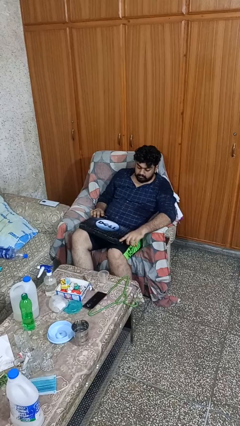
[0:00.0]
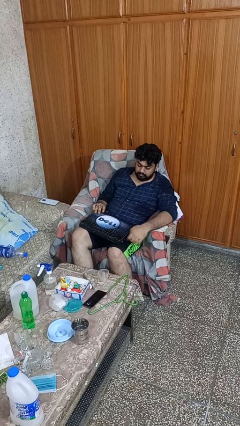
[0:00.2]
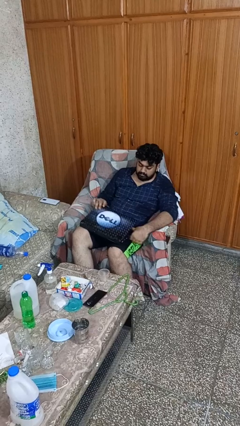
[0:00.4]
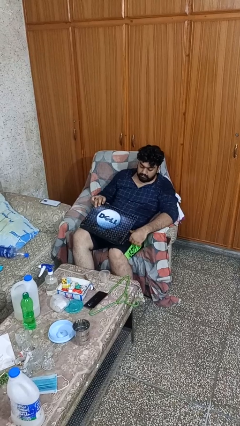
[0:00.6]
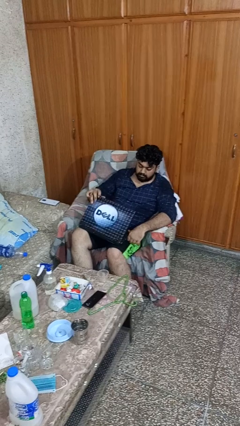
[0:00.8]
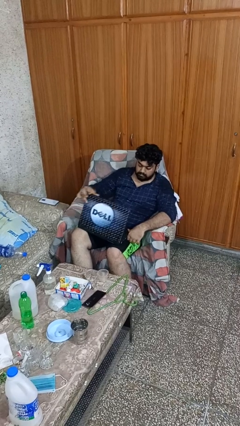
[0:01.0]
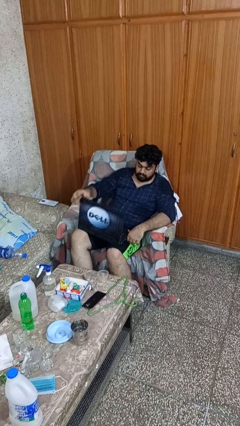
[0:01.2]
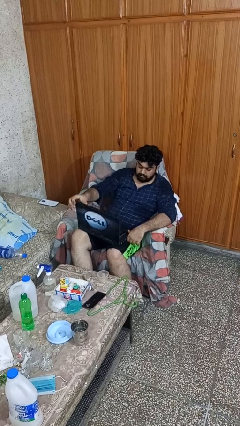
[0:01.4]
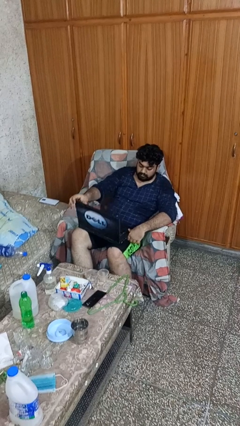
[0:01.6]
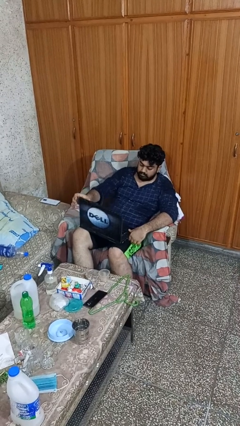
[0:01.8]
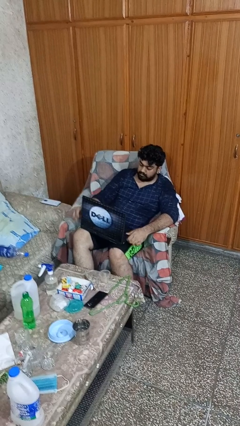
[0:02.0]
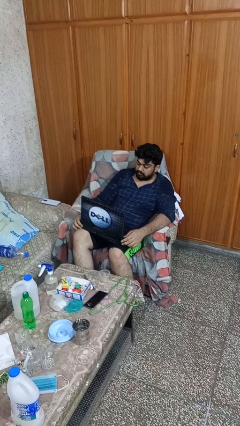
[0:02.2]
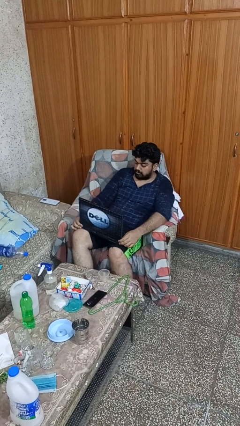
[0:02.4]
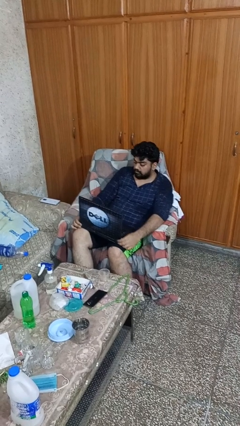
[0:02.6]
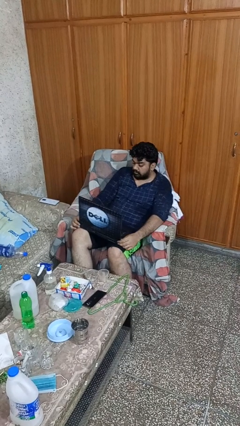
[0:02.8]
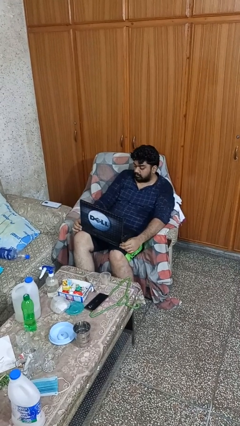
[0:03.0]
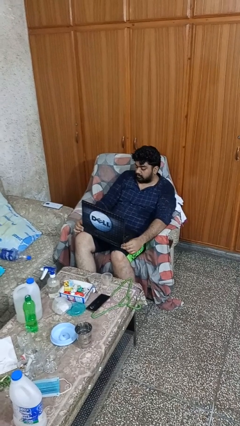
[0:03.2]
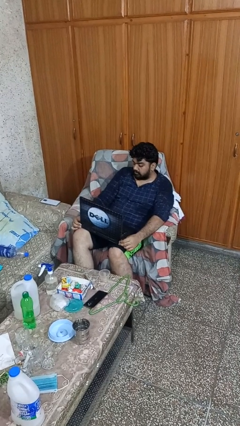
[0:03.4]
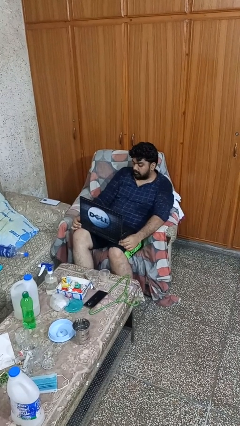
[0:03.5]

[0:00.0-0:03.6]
person opens laptop

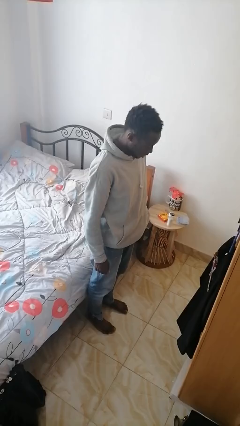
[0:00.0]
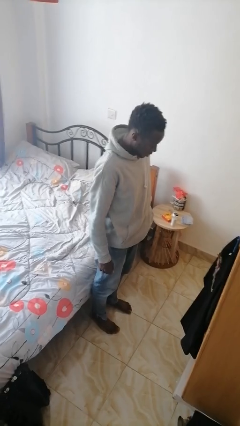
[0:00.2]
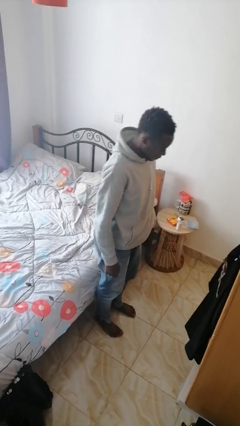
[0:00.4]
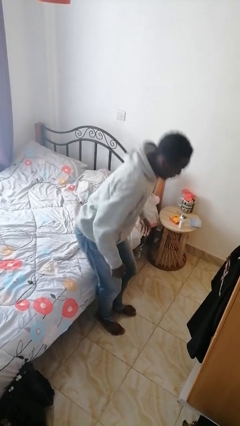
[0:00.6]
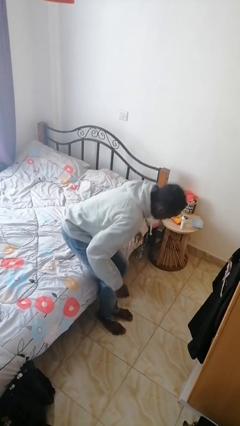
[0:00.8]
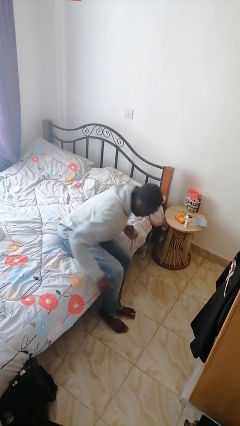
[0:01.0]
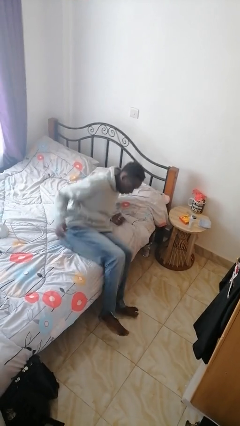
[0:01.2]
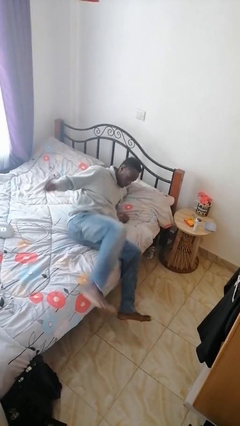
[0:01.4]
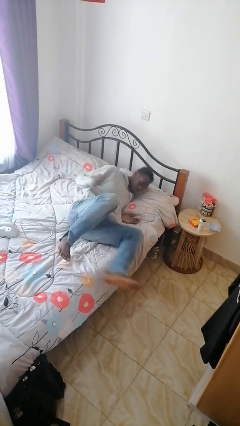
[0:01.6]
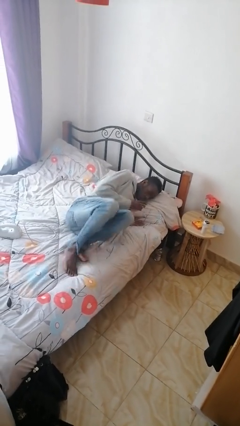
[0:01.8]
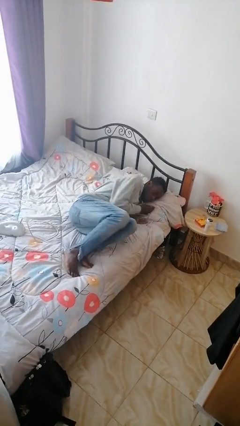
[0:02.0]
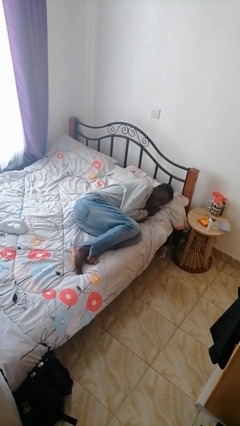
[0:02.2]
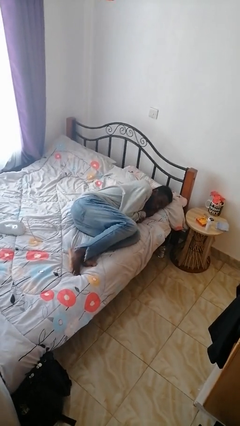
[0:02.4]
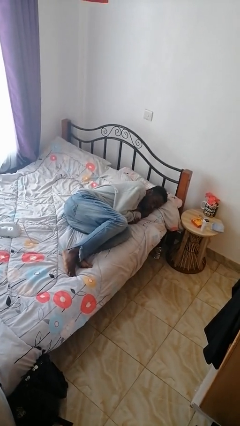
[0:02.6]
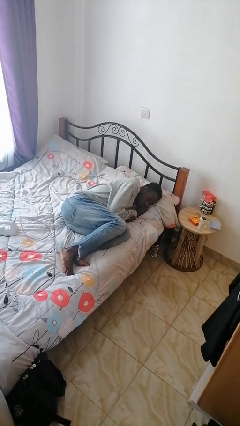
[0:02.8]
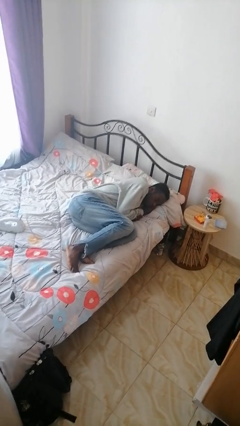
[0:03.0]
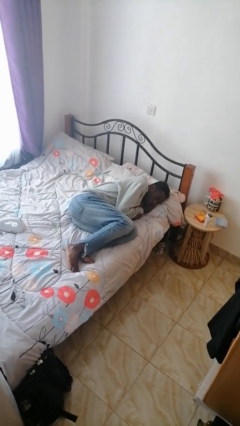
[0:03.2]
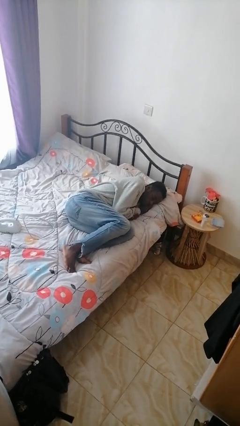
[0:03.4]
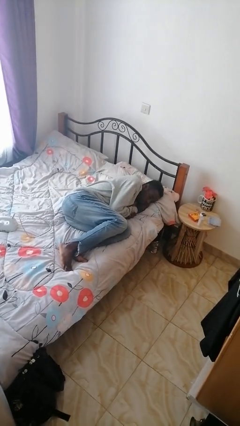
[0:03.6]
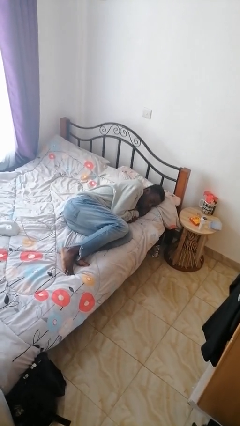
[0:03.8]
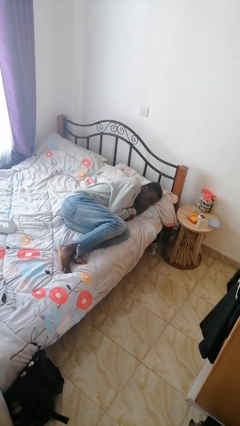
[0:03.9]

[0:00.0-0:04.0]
person lies down on bed

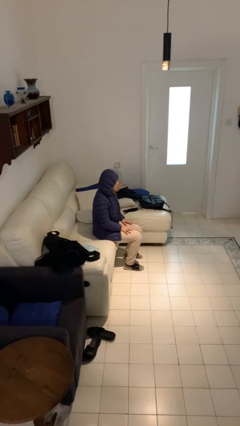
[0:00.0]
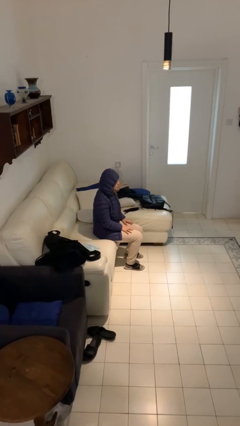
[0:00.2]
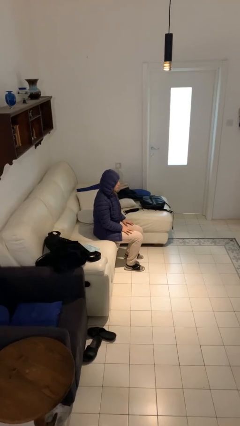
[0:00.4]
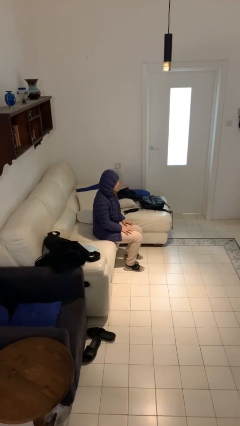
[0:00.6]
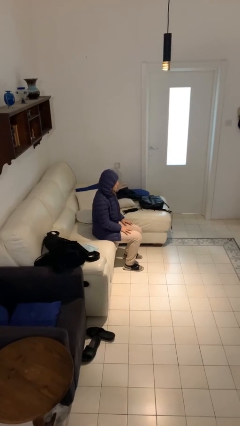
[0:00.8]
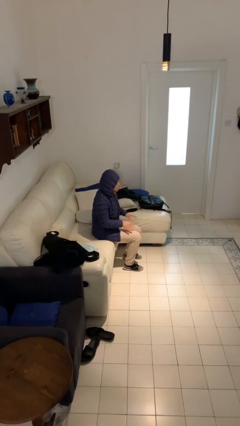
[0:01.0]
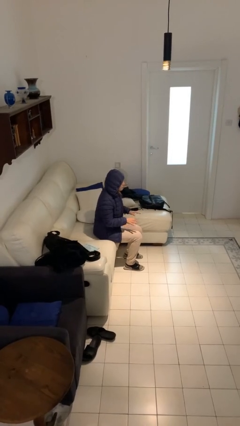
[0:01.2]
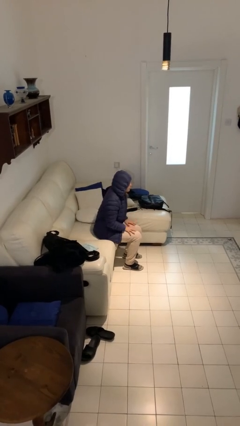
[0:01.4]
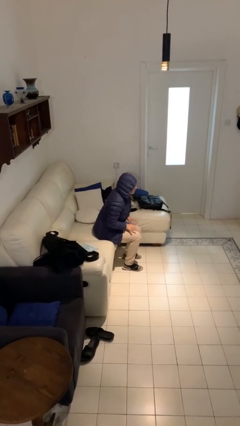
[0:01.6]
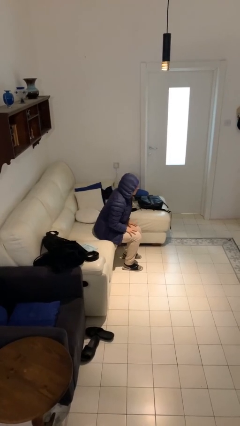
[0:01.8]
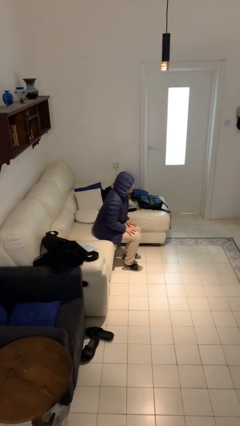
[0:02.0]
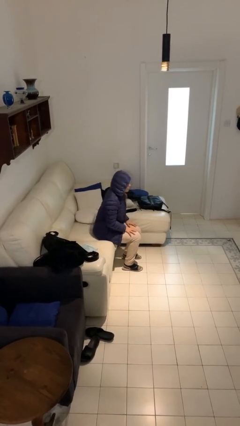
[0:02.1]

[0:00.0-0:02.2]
person slaps hands on thighs

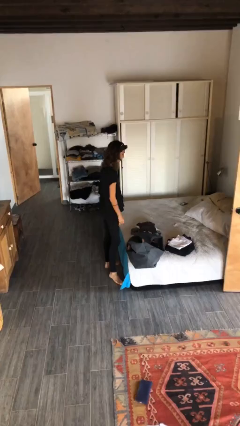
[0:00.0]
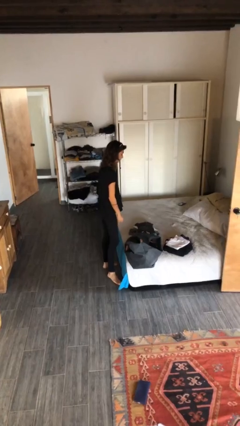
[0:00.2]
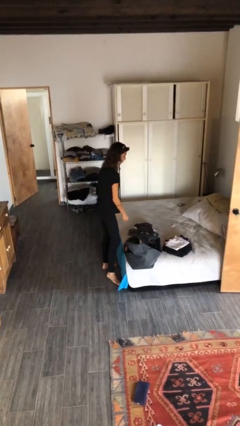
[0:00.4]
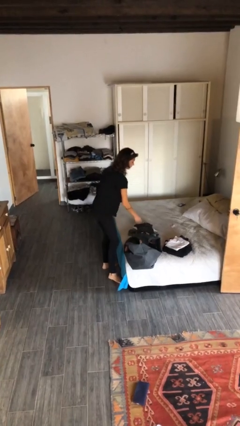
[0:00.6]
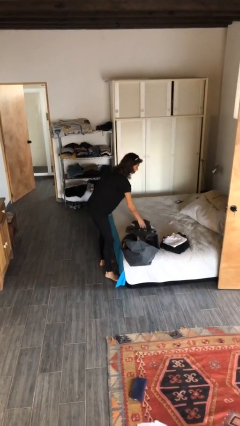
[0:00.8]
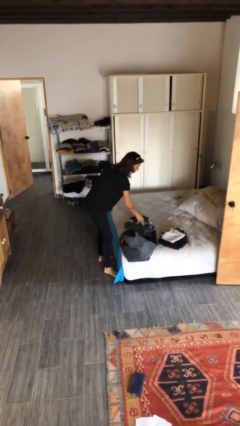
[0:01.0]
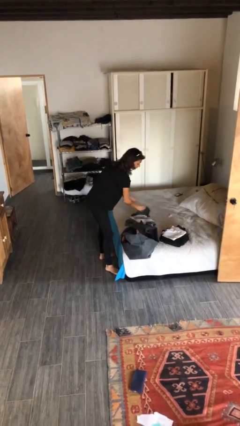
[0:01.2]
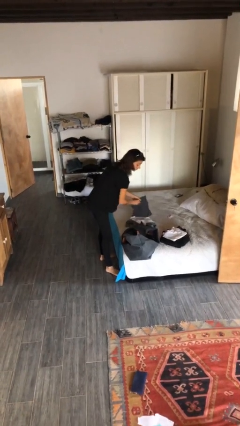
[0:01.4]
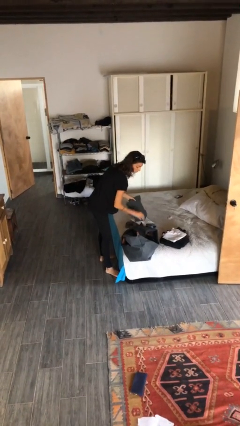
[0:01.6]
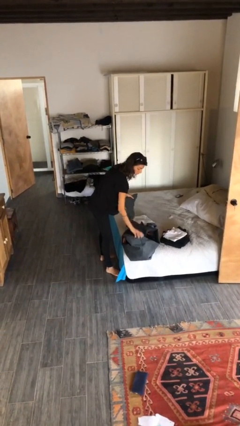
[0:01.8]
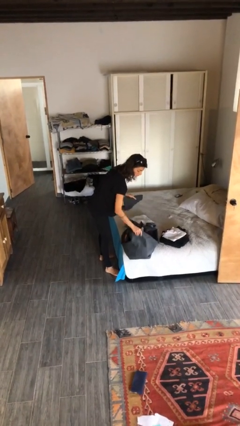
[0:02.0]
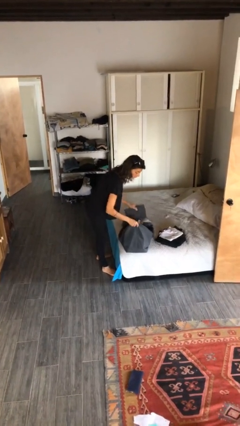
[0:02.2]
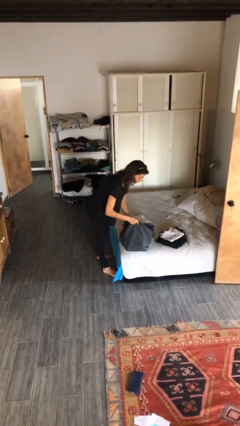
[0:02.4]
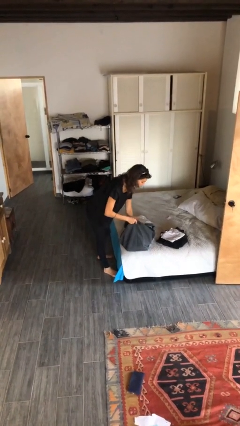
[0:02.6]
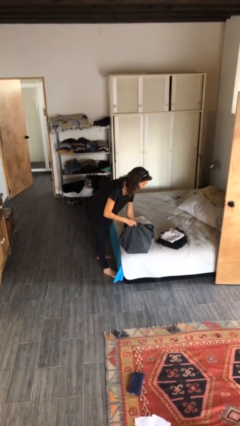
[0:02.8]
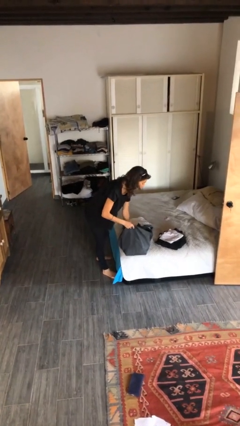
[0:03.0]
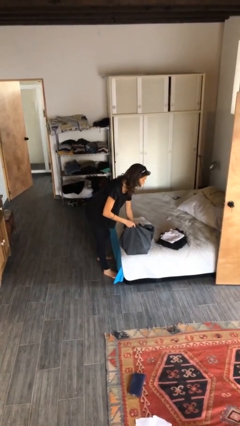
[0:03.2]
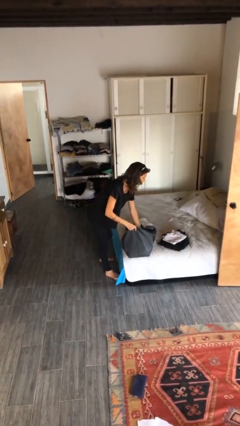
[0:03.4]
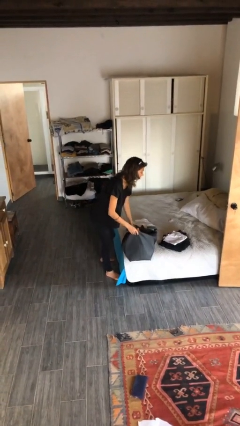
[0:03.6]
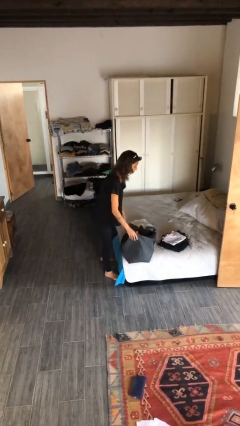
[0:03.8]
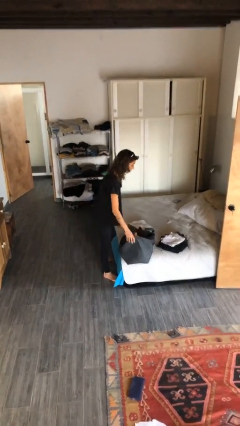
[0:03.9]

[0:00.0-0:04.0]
person loads clothes into suitcase

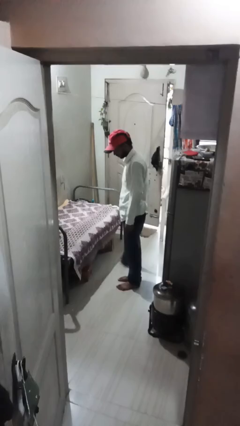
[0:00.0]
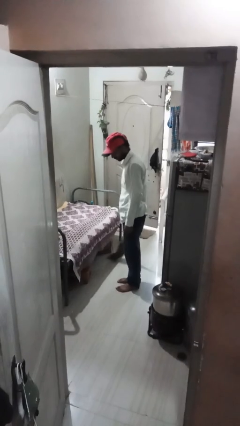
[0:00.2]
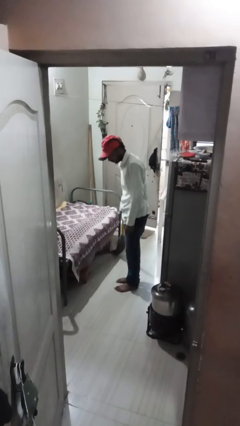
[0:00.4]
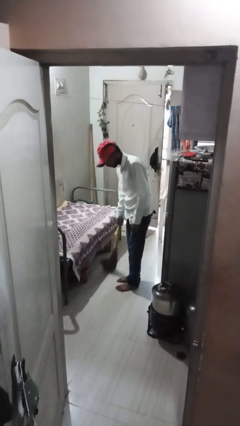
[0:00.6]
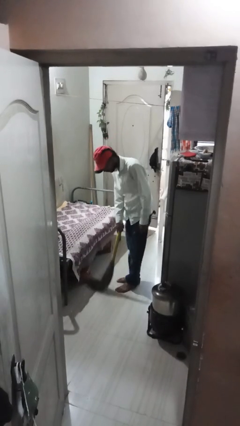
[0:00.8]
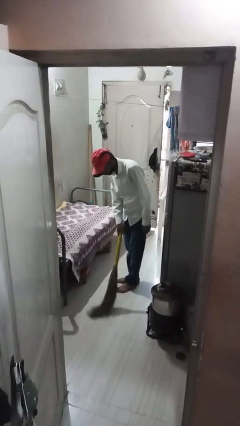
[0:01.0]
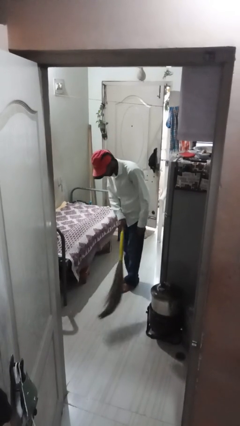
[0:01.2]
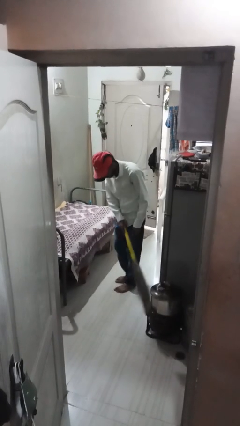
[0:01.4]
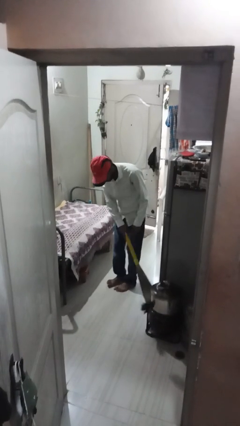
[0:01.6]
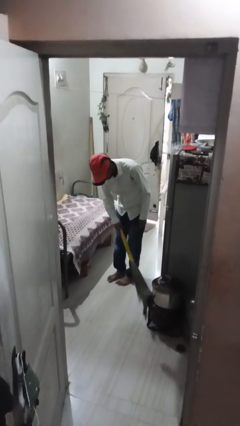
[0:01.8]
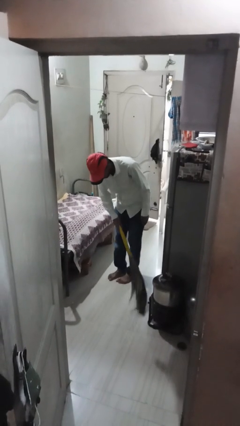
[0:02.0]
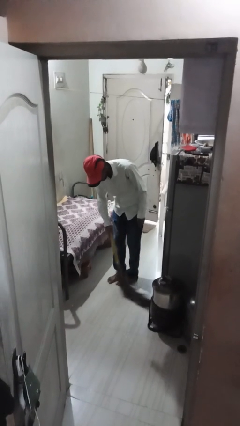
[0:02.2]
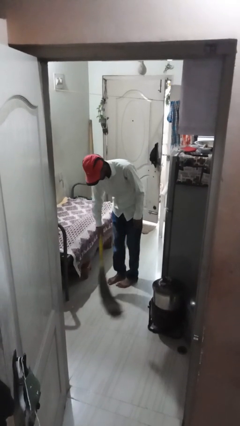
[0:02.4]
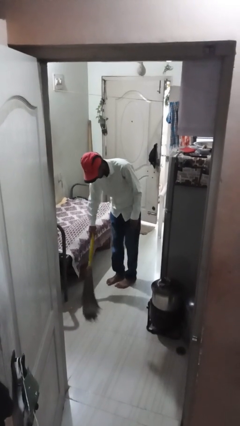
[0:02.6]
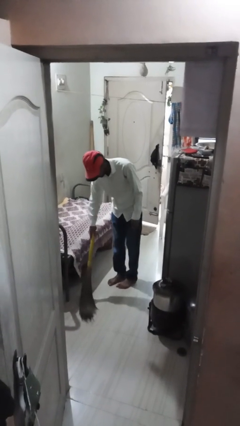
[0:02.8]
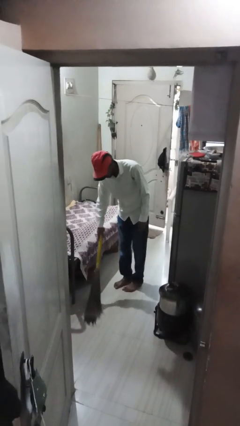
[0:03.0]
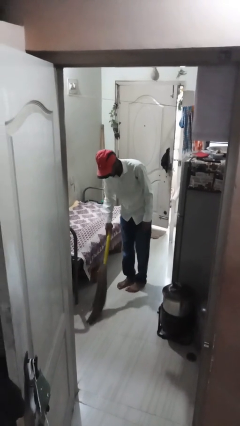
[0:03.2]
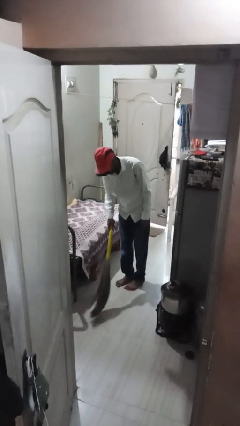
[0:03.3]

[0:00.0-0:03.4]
person sweeps floor
